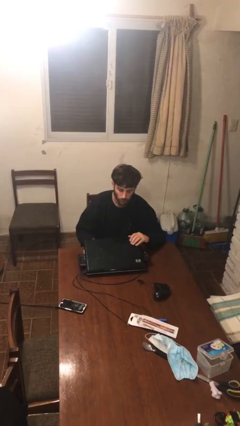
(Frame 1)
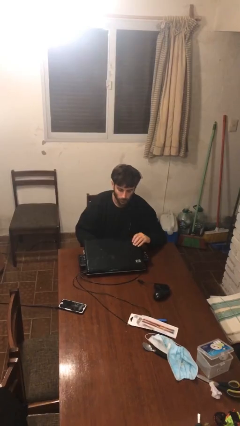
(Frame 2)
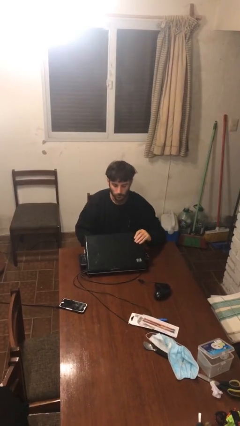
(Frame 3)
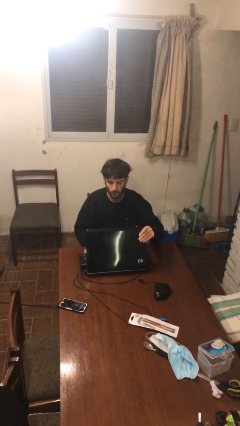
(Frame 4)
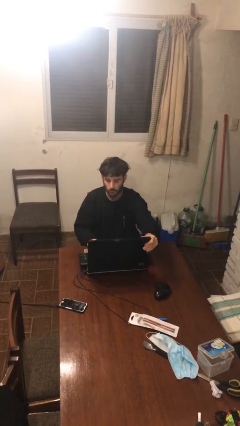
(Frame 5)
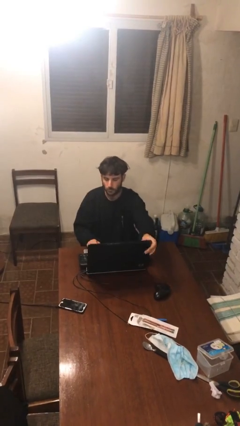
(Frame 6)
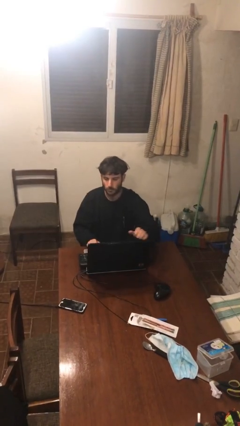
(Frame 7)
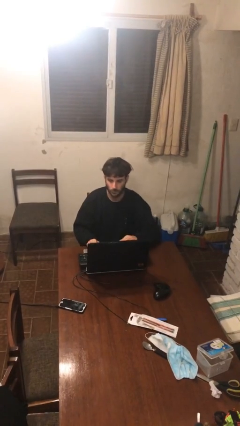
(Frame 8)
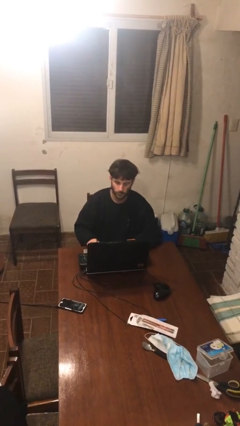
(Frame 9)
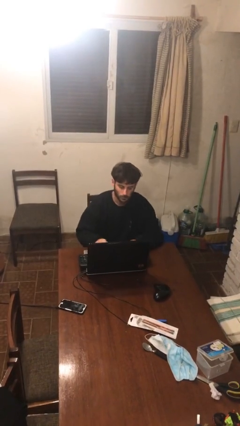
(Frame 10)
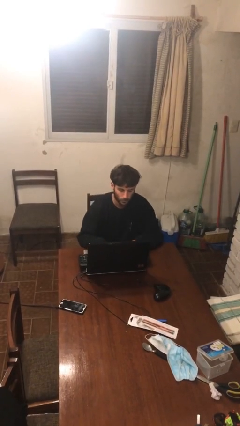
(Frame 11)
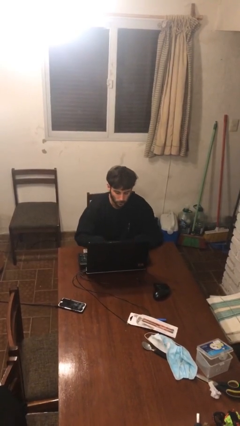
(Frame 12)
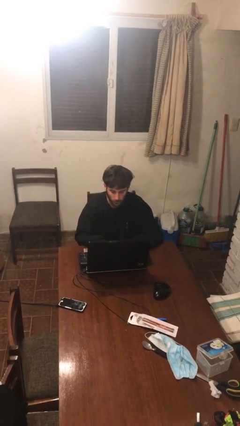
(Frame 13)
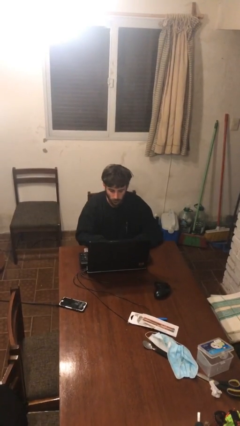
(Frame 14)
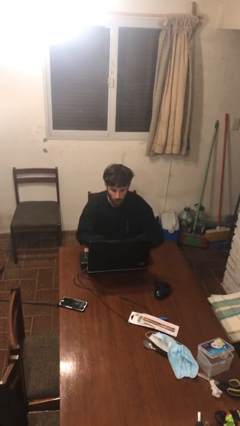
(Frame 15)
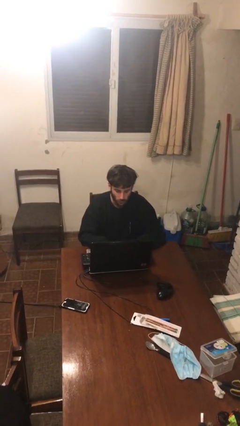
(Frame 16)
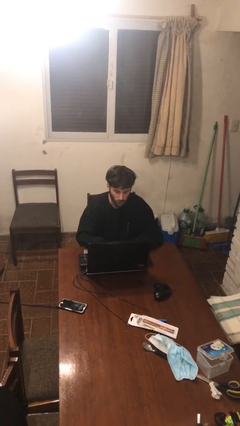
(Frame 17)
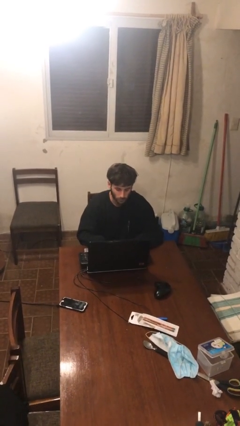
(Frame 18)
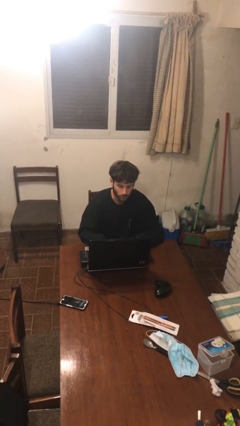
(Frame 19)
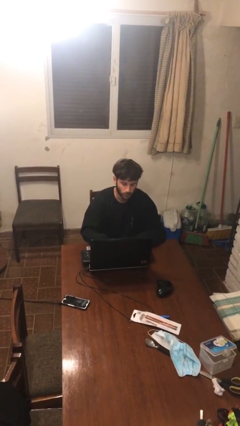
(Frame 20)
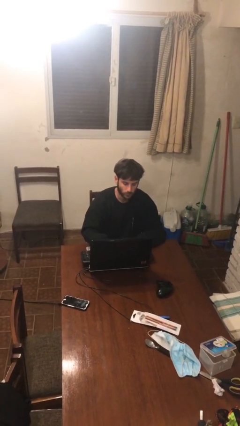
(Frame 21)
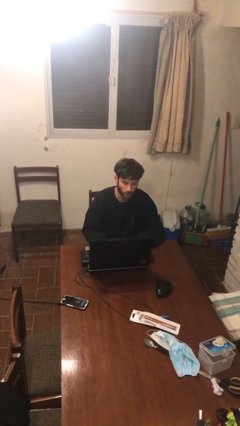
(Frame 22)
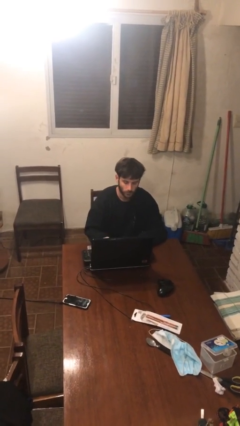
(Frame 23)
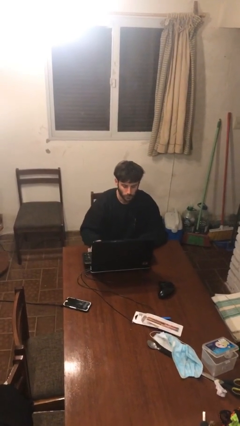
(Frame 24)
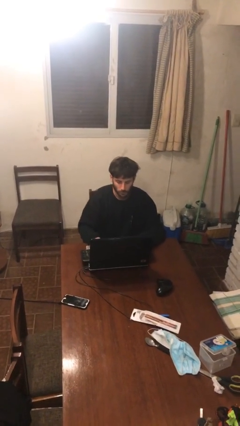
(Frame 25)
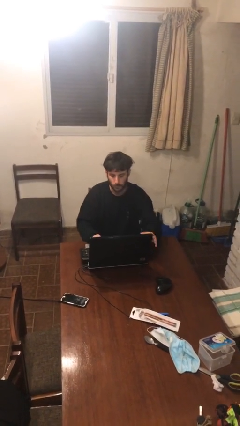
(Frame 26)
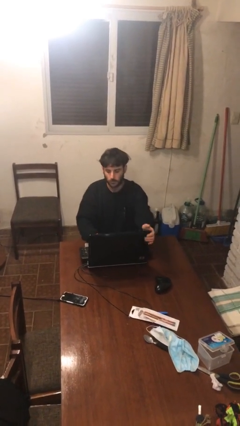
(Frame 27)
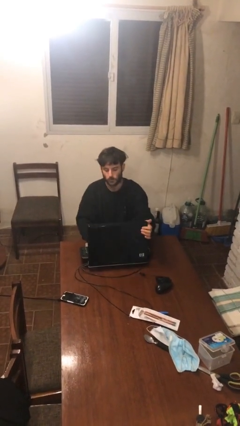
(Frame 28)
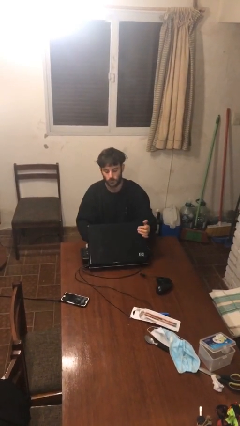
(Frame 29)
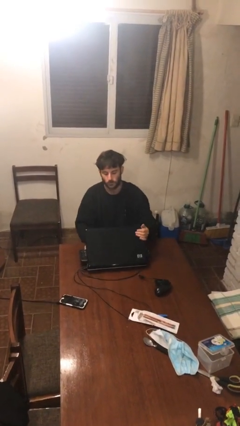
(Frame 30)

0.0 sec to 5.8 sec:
person interacts with laptop

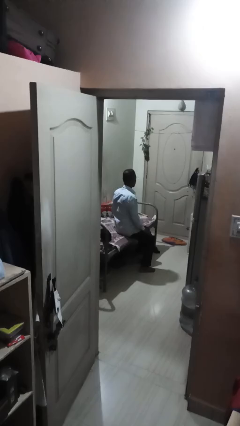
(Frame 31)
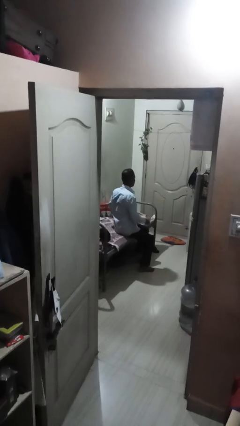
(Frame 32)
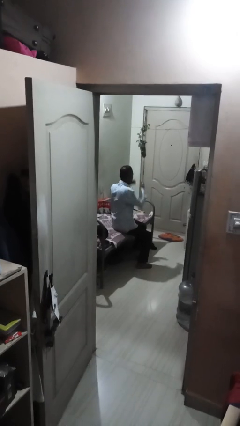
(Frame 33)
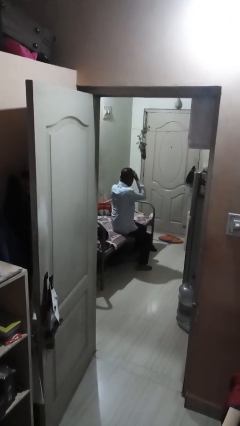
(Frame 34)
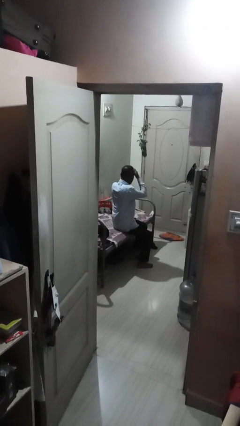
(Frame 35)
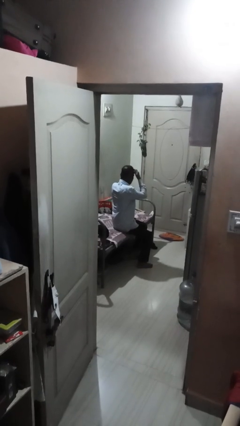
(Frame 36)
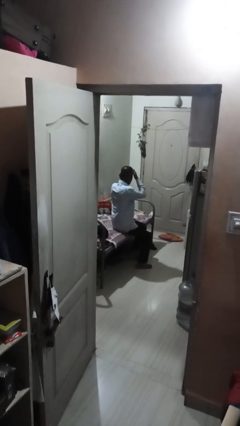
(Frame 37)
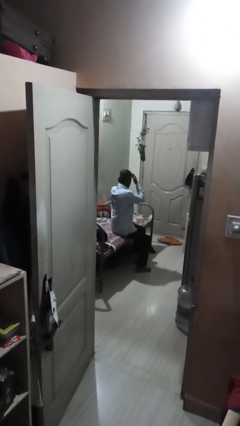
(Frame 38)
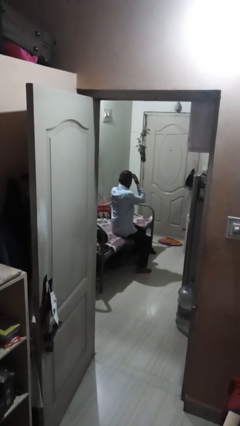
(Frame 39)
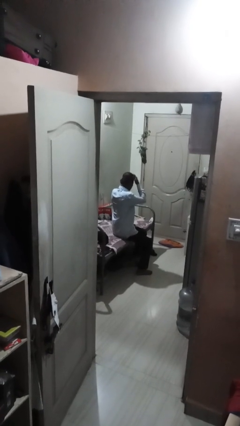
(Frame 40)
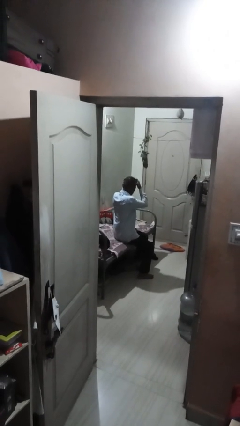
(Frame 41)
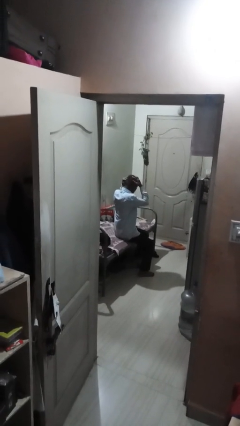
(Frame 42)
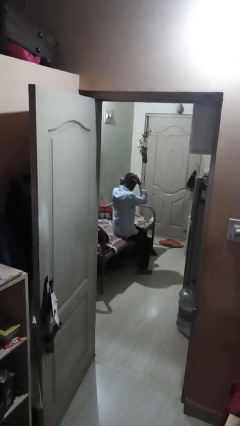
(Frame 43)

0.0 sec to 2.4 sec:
person strokes hair

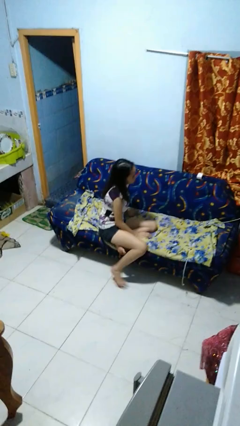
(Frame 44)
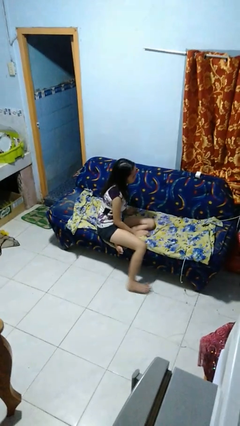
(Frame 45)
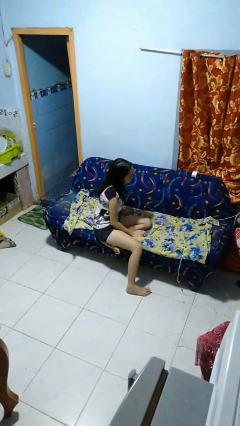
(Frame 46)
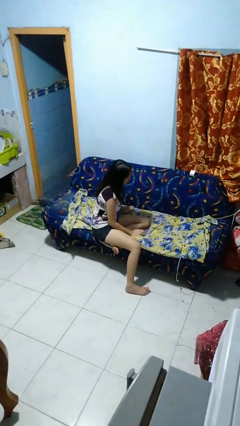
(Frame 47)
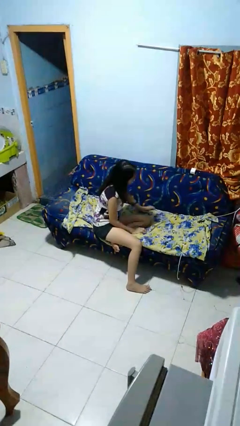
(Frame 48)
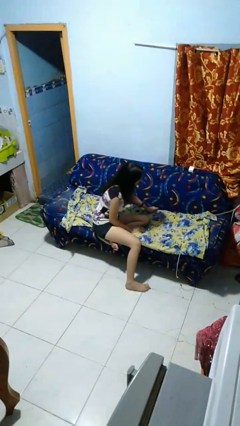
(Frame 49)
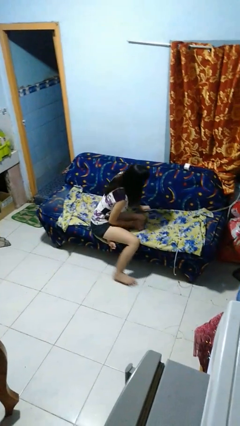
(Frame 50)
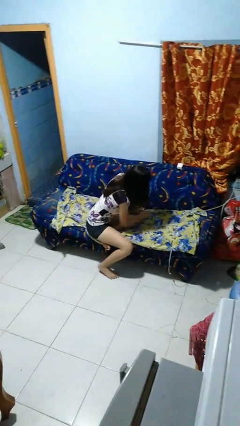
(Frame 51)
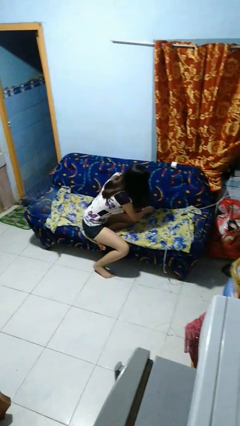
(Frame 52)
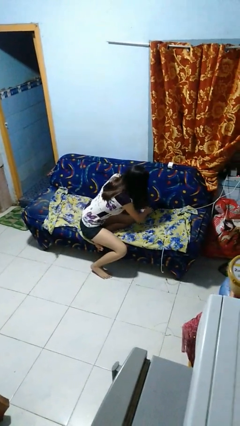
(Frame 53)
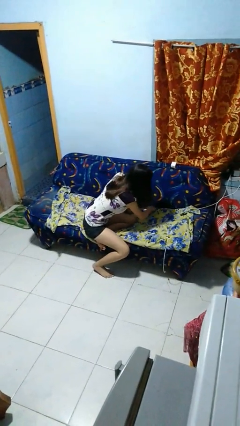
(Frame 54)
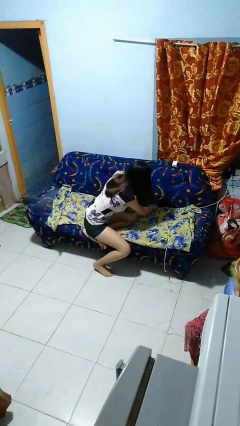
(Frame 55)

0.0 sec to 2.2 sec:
person searches in couch

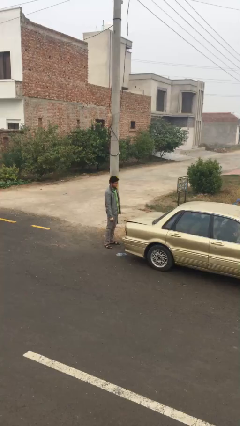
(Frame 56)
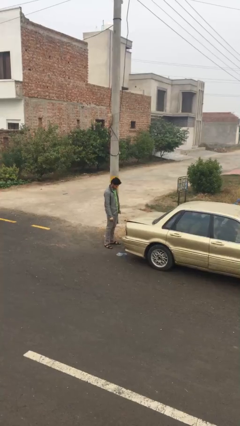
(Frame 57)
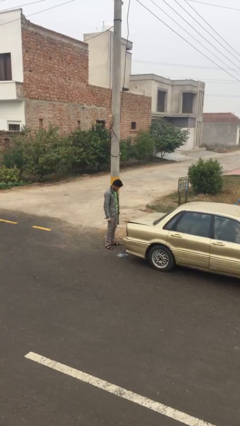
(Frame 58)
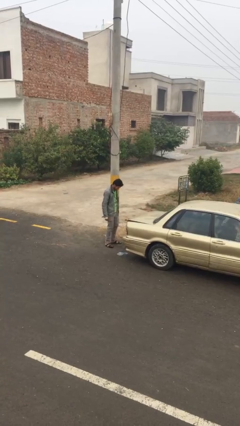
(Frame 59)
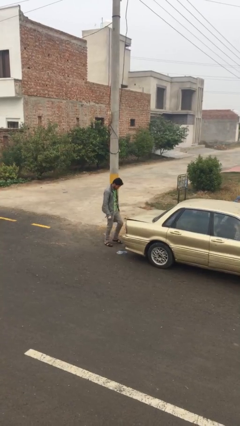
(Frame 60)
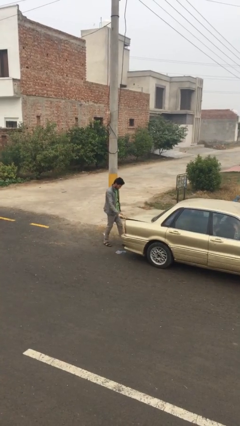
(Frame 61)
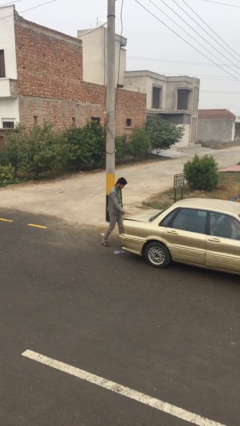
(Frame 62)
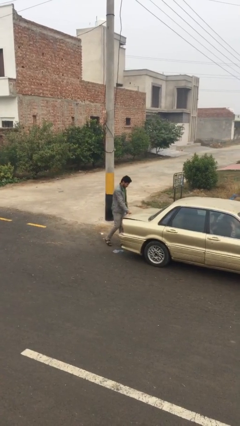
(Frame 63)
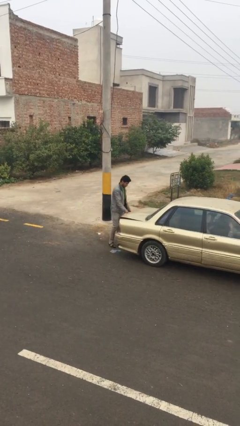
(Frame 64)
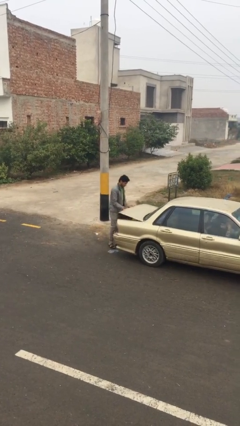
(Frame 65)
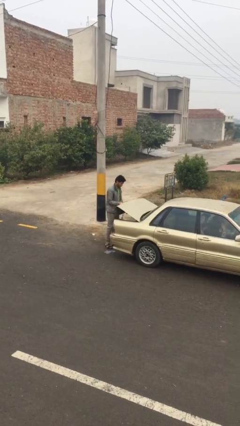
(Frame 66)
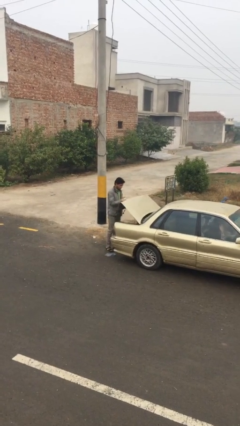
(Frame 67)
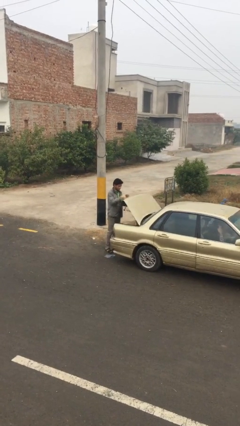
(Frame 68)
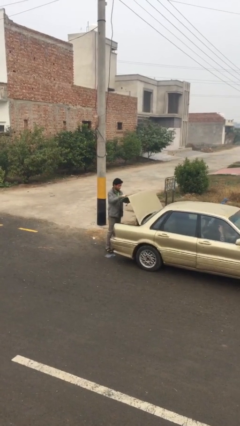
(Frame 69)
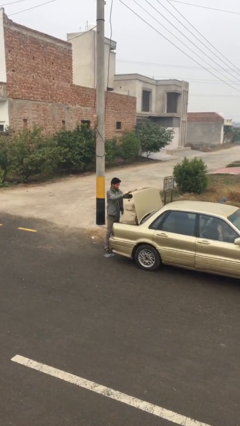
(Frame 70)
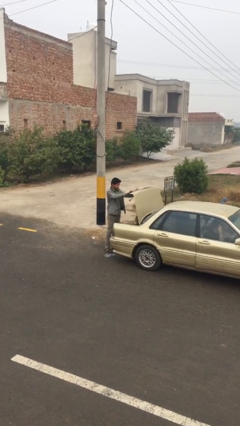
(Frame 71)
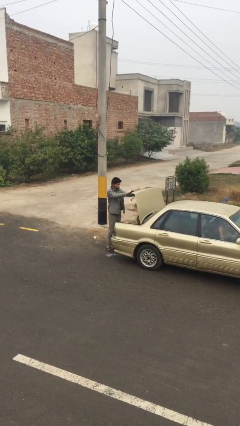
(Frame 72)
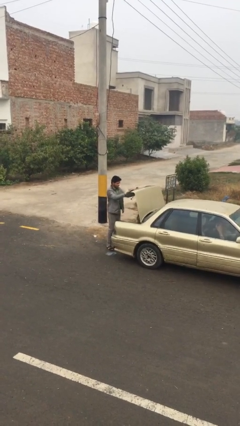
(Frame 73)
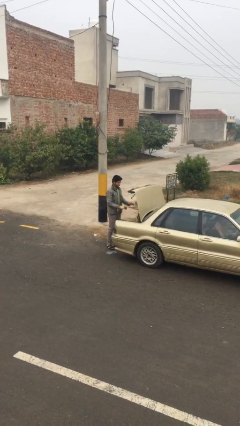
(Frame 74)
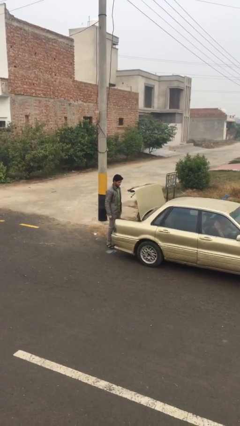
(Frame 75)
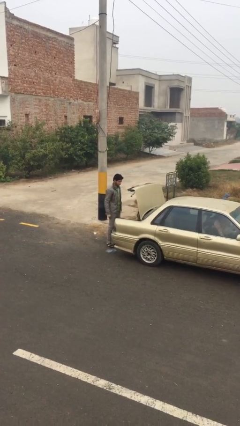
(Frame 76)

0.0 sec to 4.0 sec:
person opens car trunk

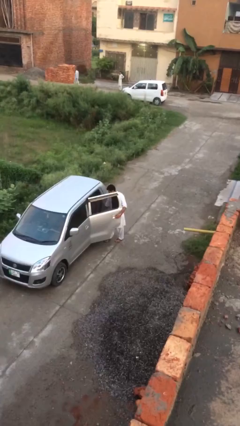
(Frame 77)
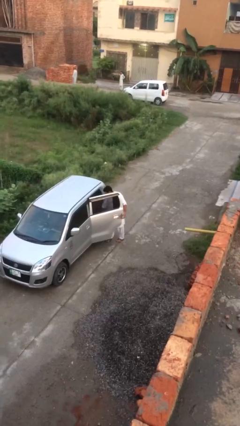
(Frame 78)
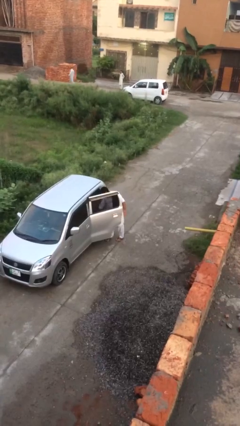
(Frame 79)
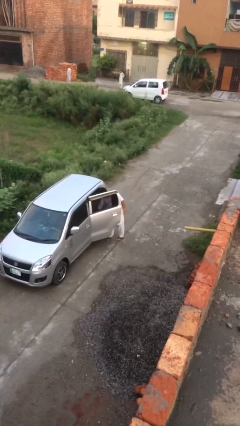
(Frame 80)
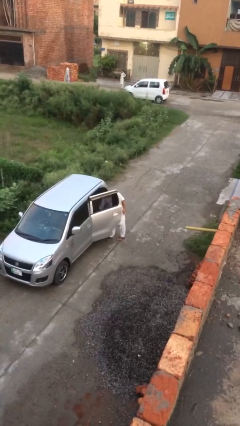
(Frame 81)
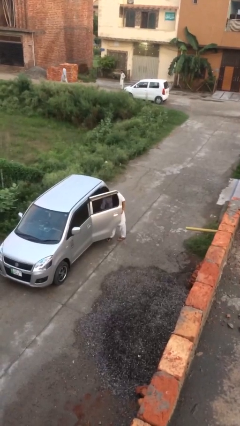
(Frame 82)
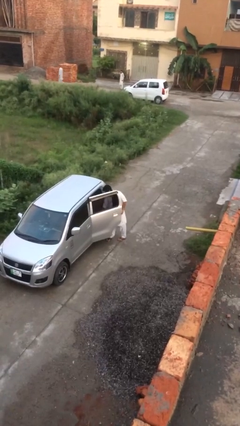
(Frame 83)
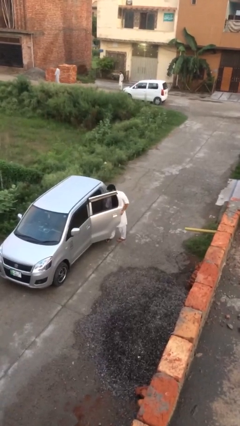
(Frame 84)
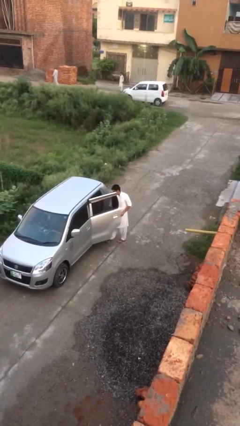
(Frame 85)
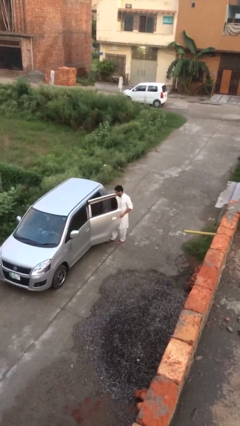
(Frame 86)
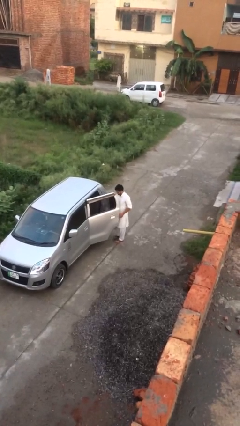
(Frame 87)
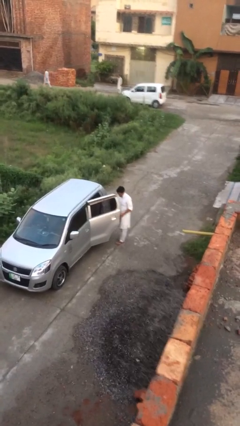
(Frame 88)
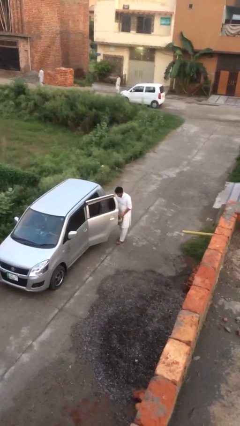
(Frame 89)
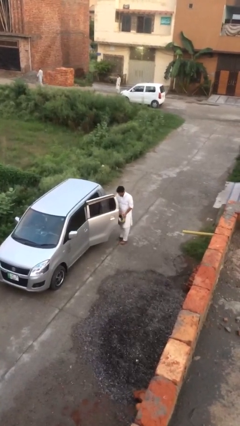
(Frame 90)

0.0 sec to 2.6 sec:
person unloads car

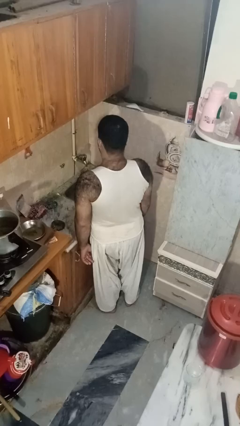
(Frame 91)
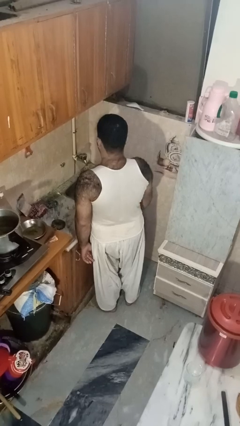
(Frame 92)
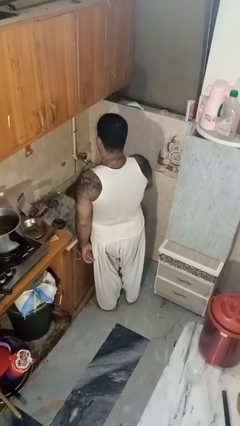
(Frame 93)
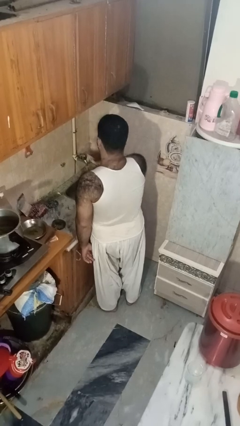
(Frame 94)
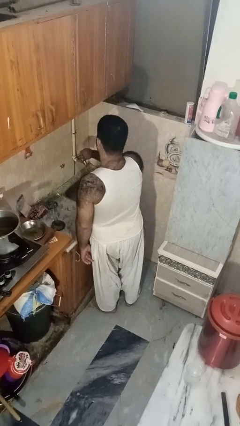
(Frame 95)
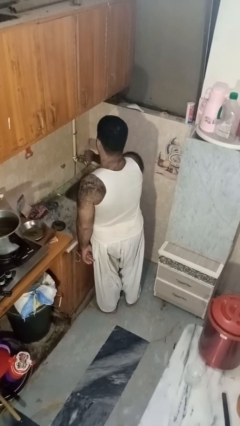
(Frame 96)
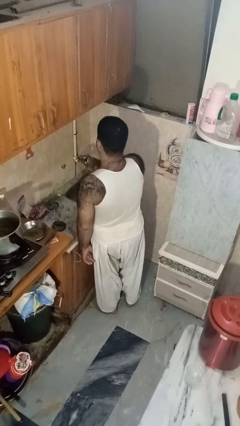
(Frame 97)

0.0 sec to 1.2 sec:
person turns off faucet
